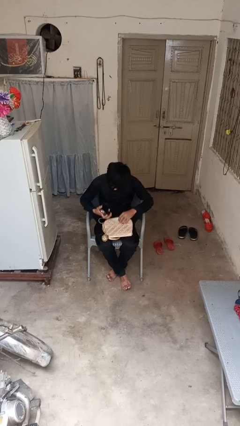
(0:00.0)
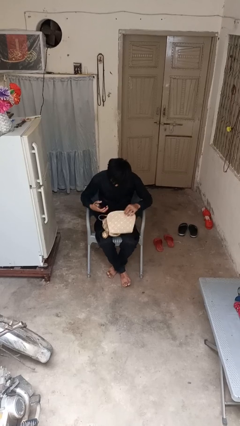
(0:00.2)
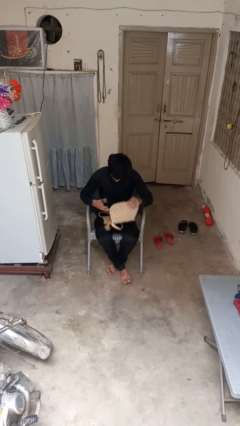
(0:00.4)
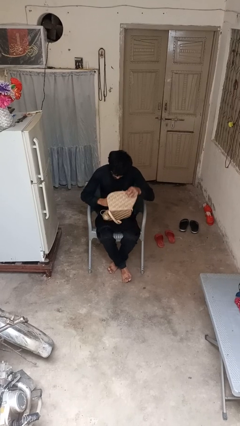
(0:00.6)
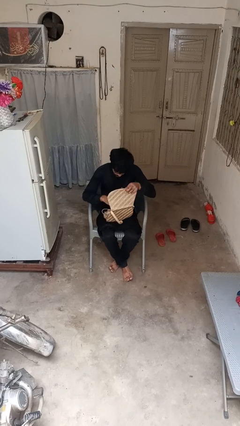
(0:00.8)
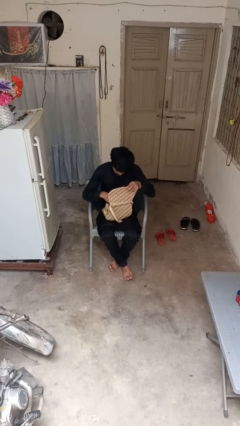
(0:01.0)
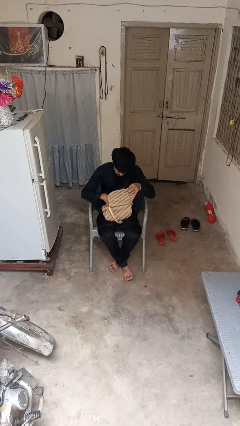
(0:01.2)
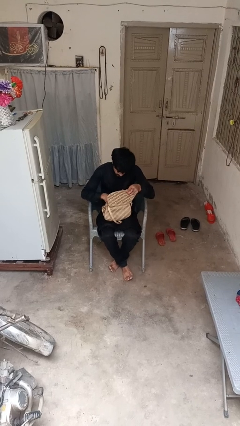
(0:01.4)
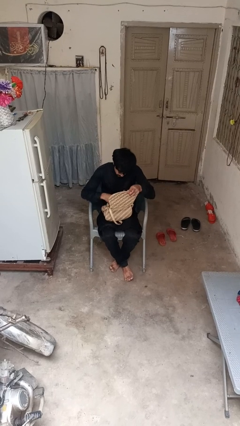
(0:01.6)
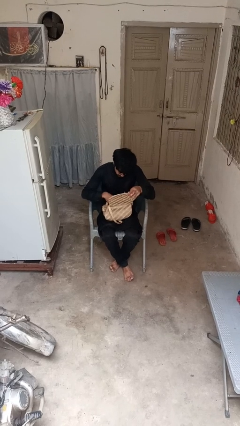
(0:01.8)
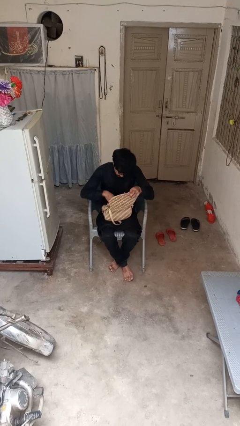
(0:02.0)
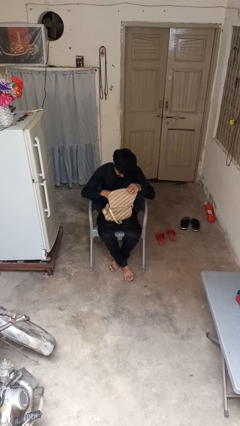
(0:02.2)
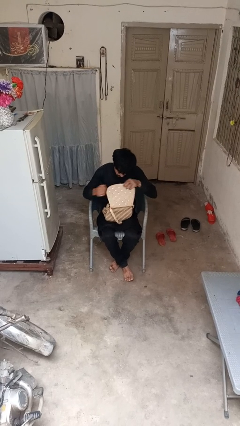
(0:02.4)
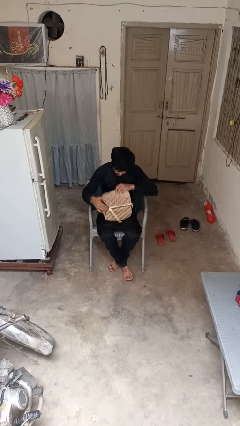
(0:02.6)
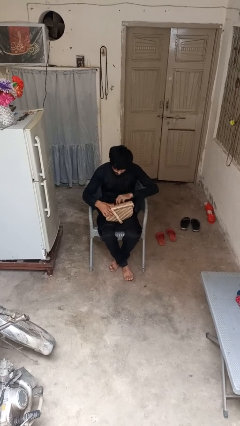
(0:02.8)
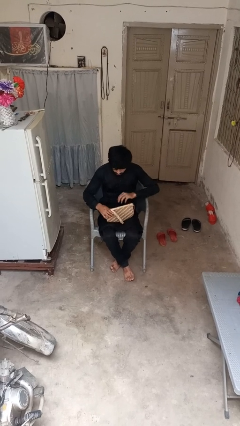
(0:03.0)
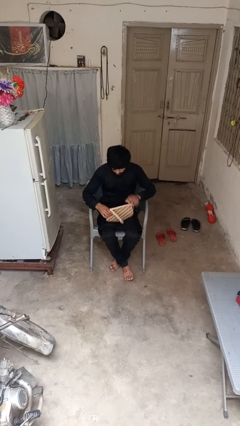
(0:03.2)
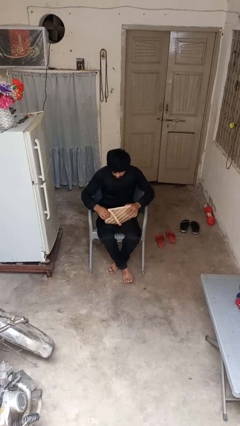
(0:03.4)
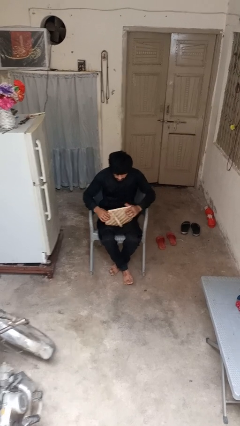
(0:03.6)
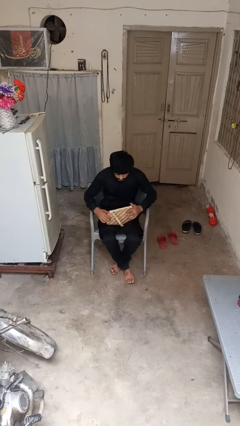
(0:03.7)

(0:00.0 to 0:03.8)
person puts object into purse

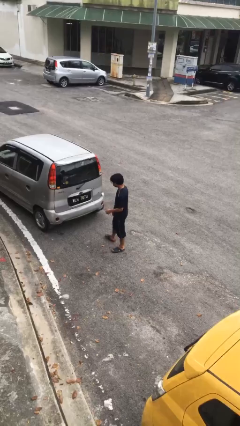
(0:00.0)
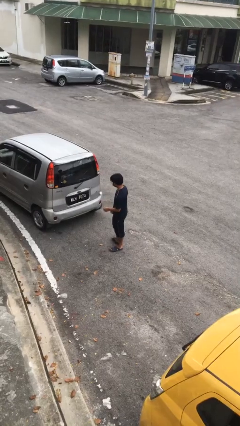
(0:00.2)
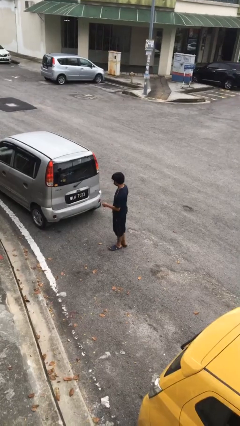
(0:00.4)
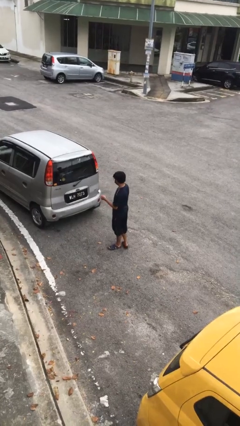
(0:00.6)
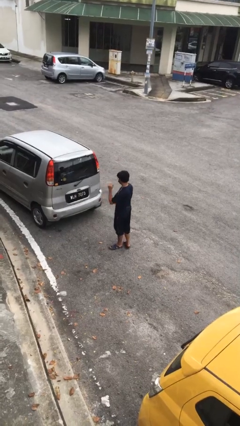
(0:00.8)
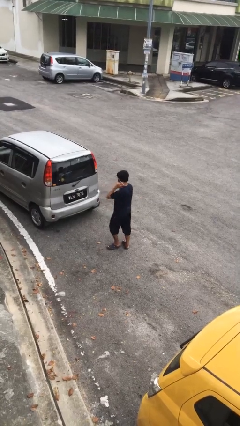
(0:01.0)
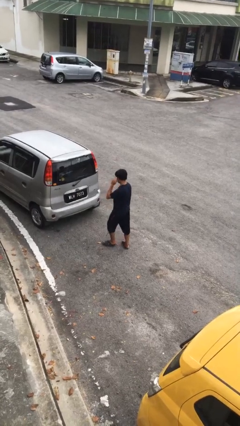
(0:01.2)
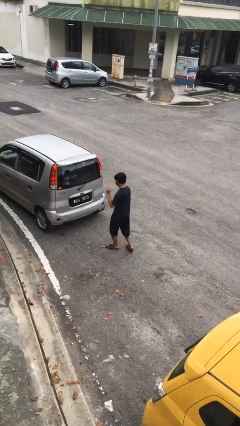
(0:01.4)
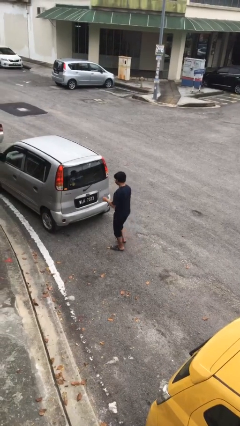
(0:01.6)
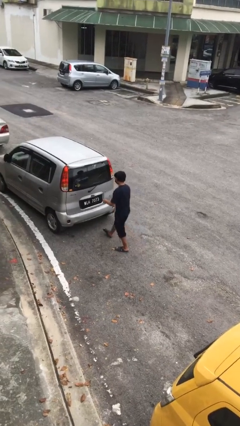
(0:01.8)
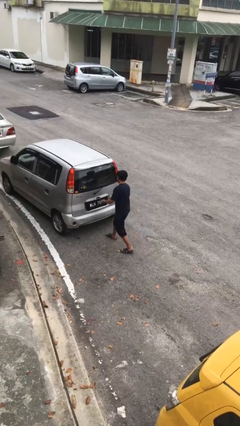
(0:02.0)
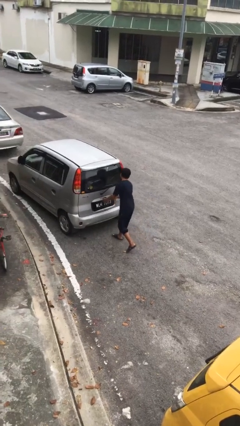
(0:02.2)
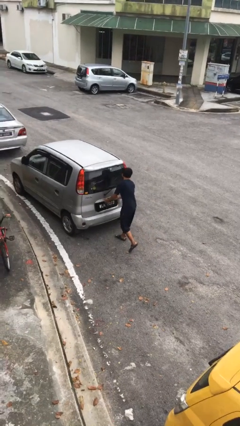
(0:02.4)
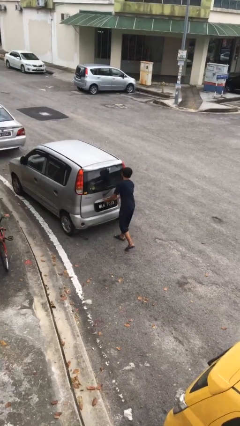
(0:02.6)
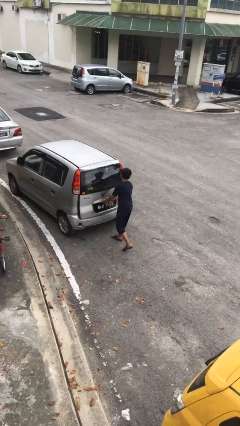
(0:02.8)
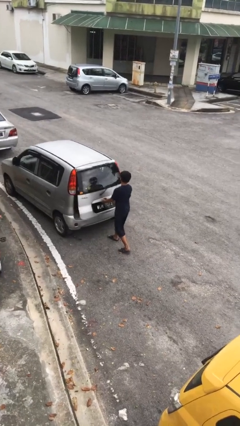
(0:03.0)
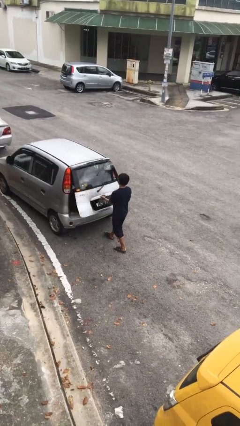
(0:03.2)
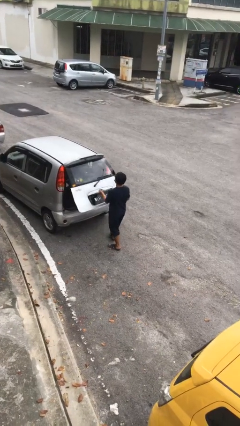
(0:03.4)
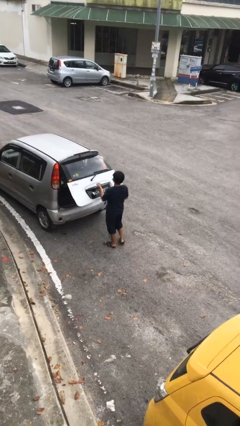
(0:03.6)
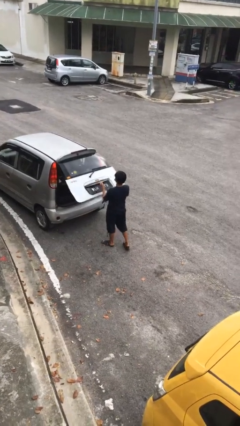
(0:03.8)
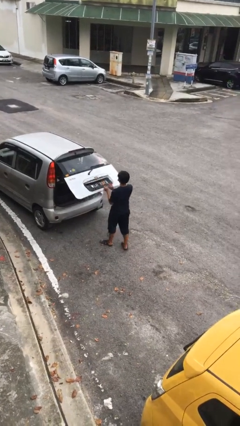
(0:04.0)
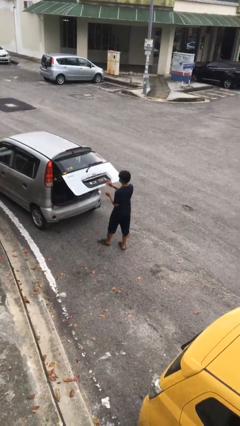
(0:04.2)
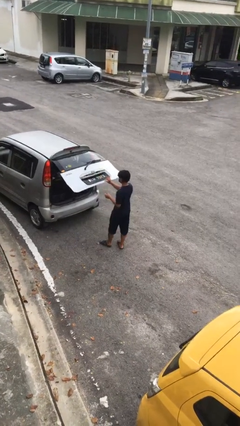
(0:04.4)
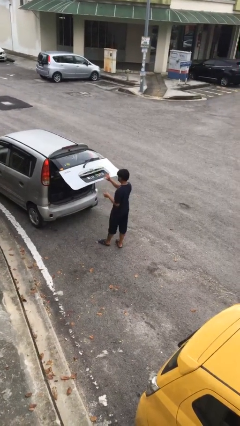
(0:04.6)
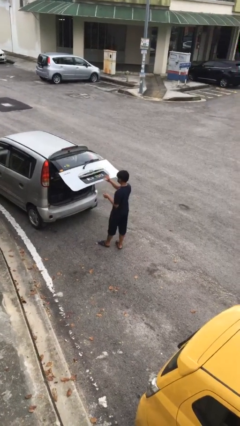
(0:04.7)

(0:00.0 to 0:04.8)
person opens car trunk

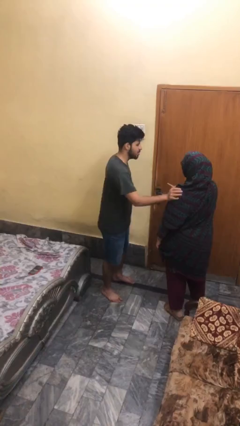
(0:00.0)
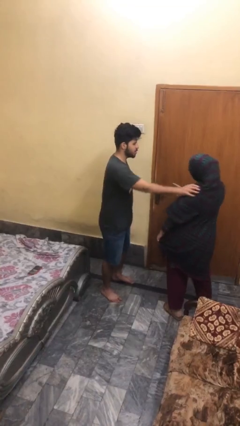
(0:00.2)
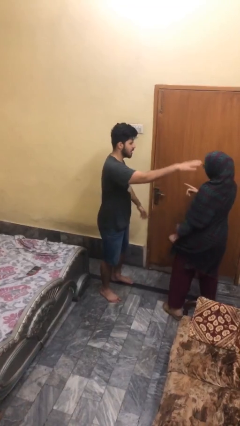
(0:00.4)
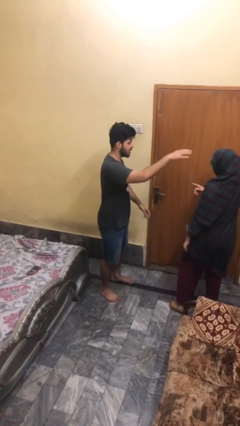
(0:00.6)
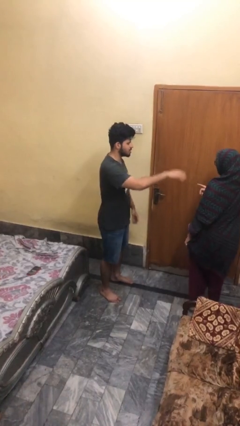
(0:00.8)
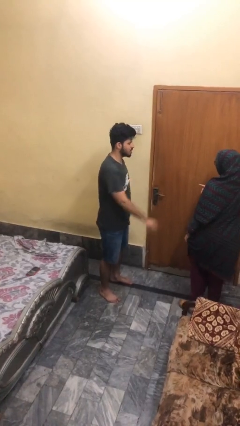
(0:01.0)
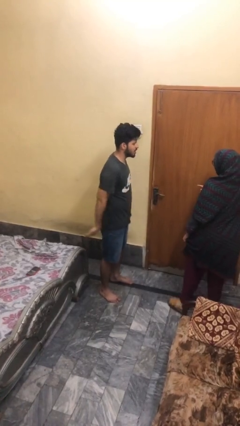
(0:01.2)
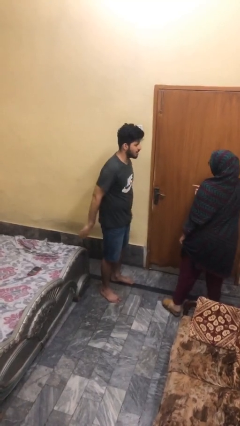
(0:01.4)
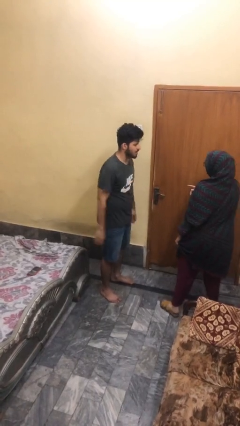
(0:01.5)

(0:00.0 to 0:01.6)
person shoves person

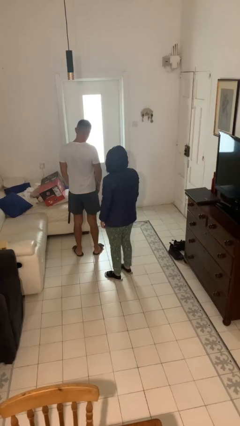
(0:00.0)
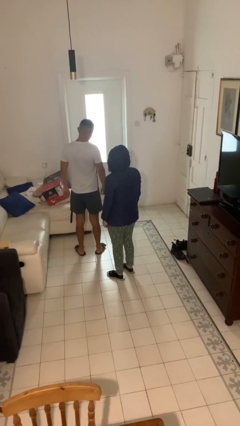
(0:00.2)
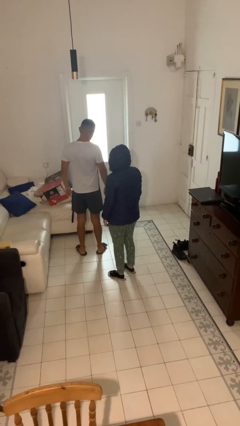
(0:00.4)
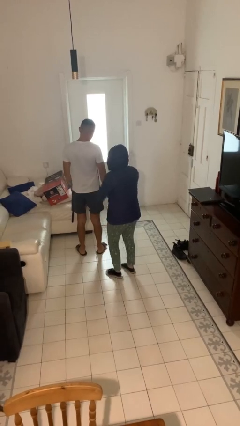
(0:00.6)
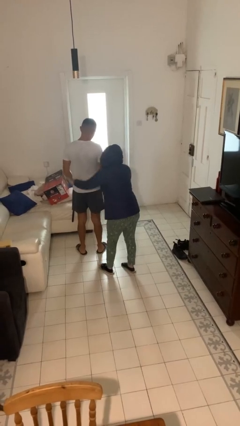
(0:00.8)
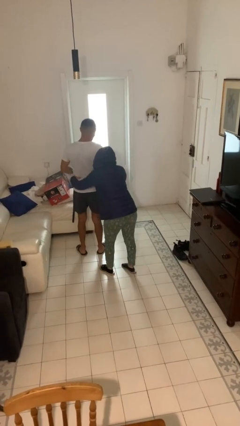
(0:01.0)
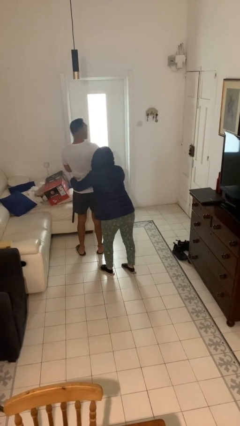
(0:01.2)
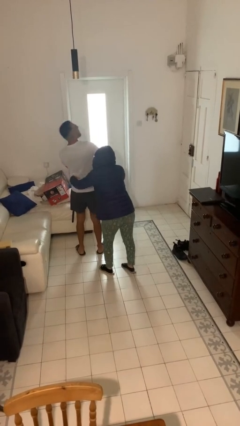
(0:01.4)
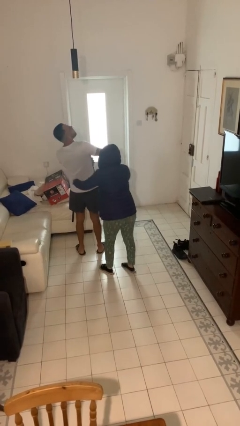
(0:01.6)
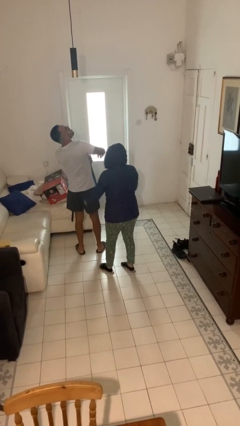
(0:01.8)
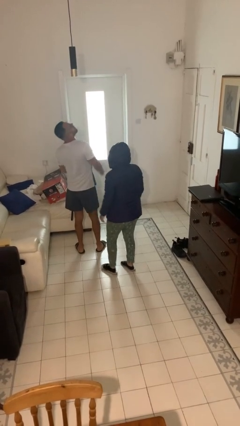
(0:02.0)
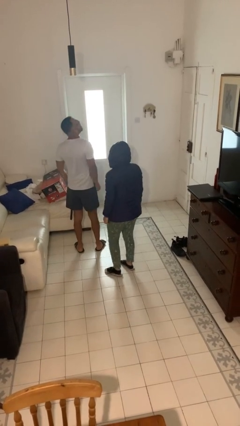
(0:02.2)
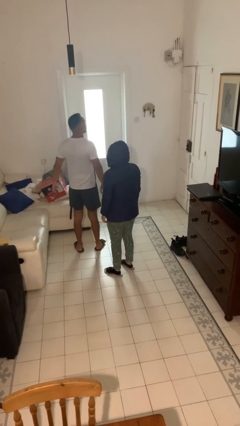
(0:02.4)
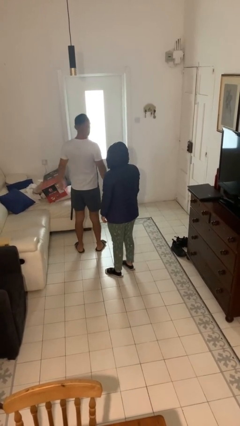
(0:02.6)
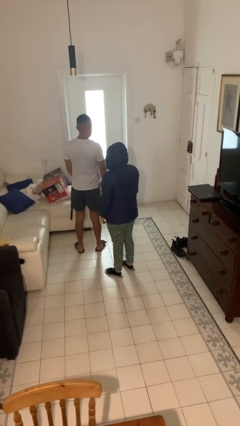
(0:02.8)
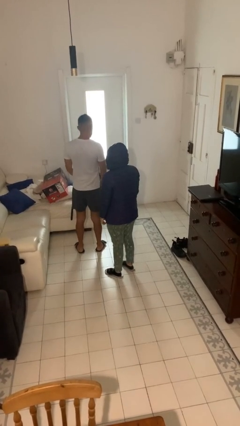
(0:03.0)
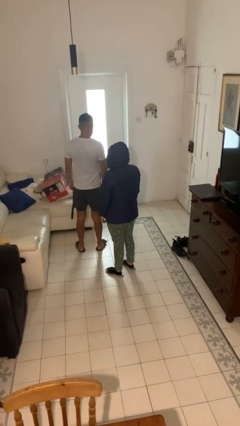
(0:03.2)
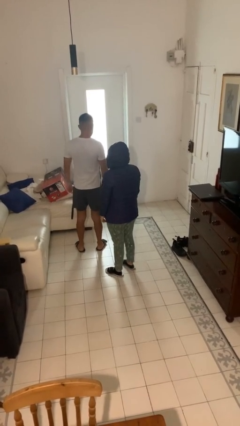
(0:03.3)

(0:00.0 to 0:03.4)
person tickles person

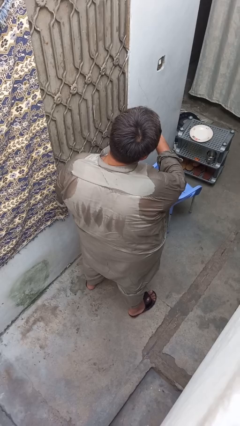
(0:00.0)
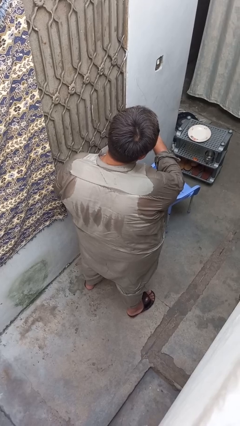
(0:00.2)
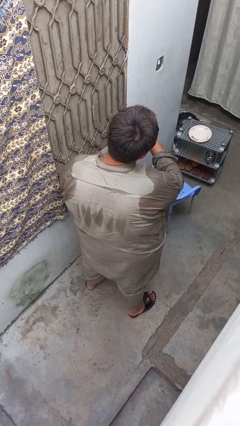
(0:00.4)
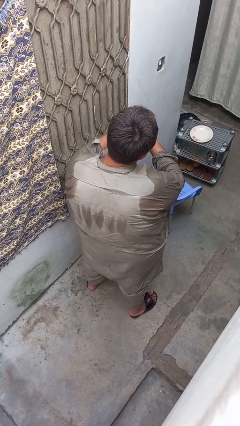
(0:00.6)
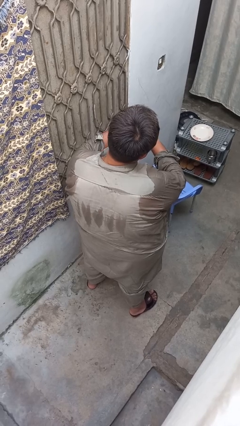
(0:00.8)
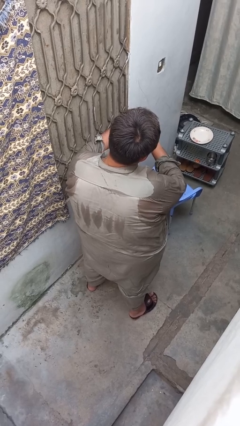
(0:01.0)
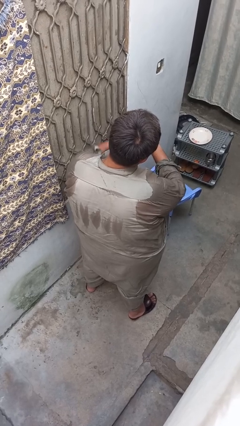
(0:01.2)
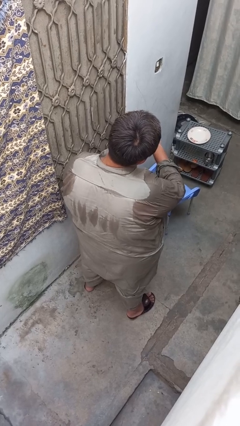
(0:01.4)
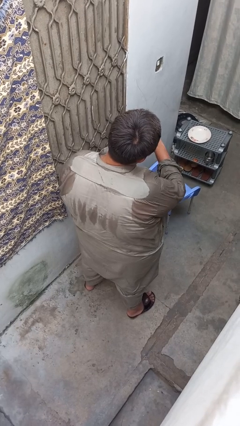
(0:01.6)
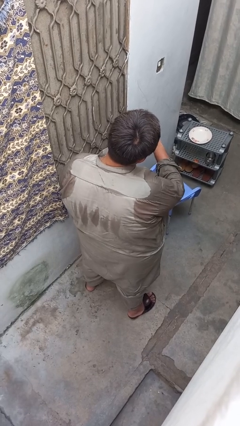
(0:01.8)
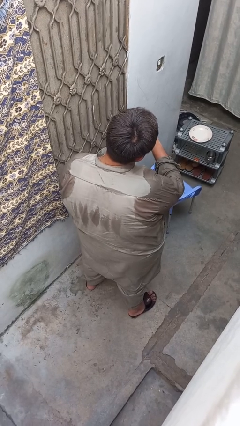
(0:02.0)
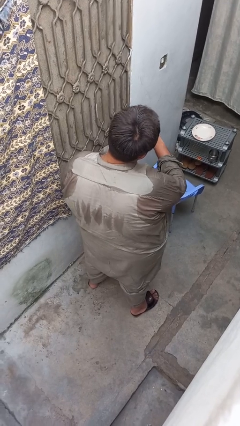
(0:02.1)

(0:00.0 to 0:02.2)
person takes off ring

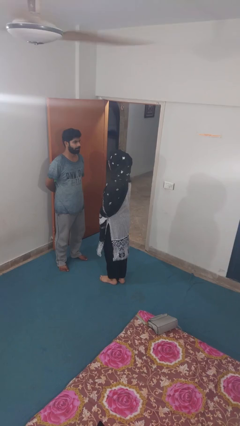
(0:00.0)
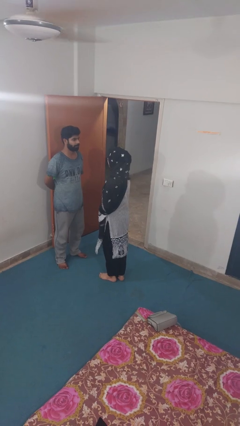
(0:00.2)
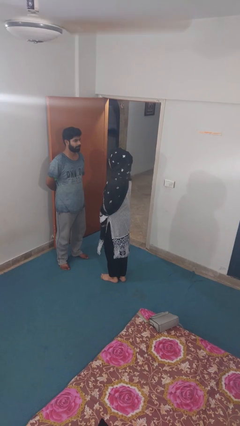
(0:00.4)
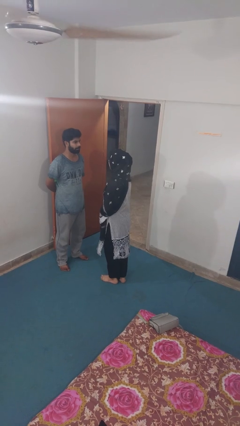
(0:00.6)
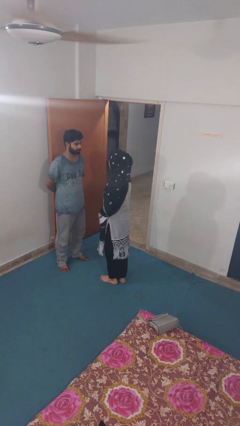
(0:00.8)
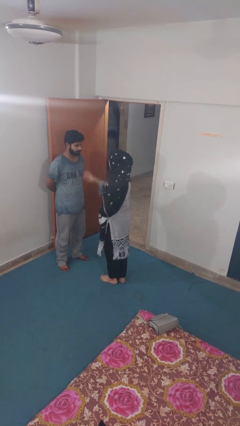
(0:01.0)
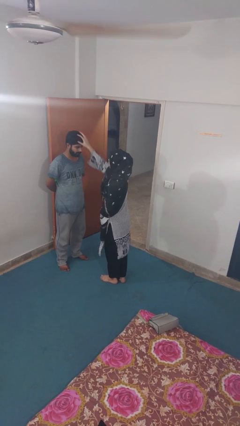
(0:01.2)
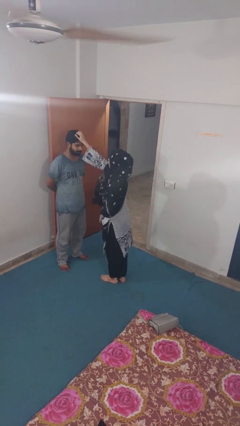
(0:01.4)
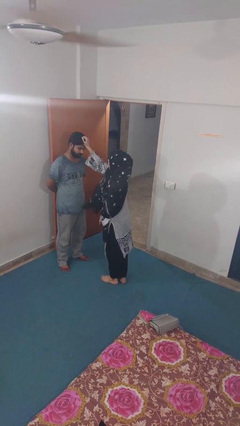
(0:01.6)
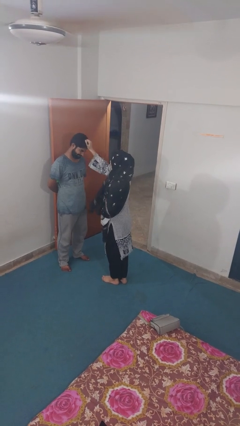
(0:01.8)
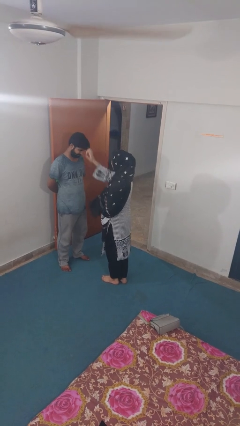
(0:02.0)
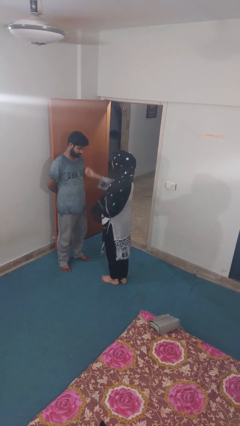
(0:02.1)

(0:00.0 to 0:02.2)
person grabs person by hair
